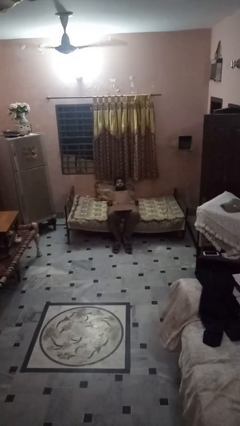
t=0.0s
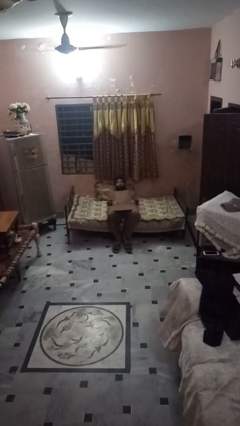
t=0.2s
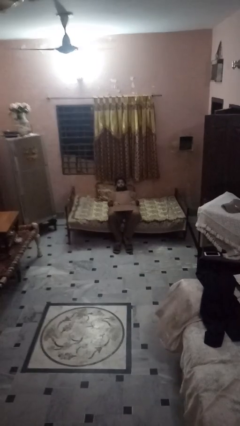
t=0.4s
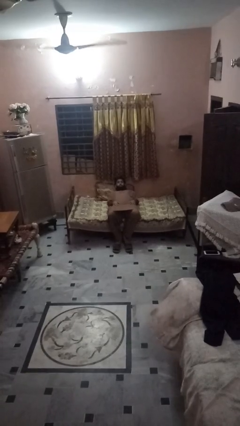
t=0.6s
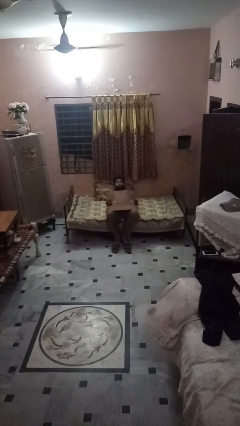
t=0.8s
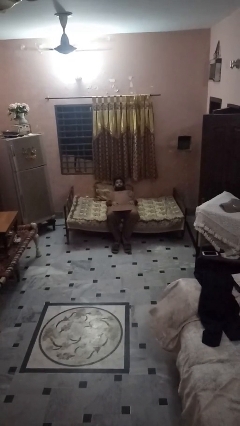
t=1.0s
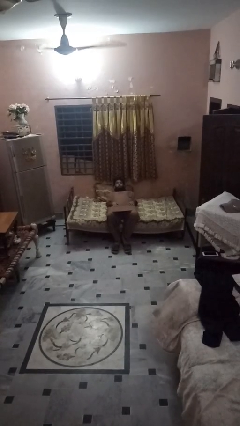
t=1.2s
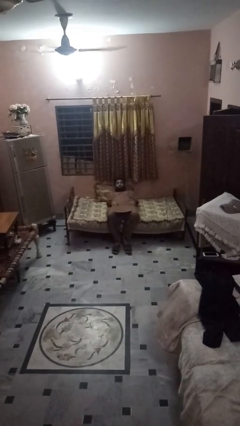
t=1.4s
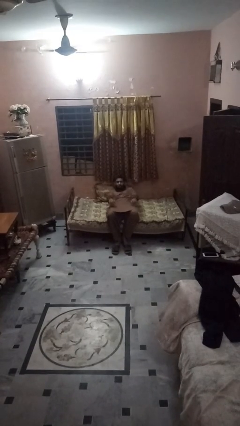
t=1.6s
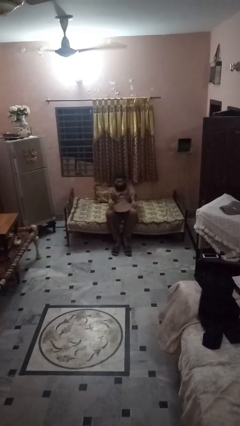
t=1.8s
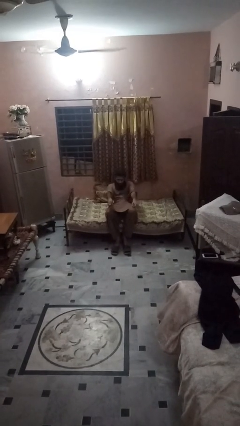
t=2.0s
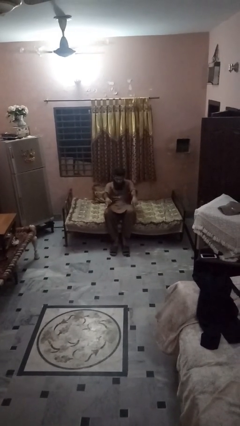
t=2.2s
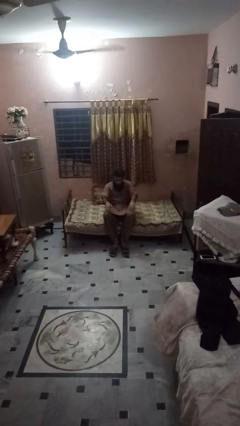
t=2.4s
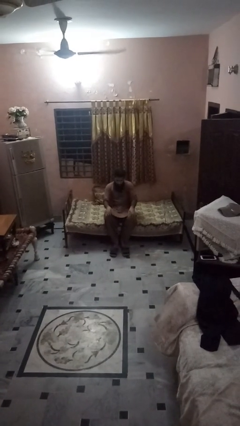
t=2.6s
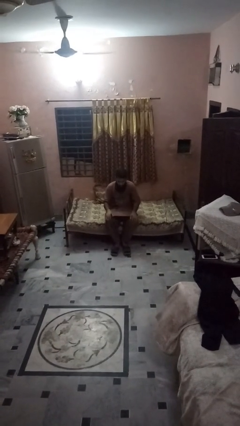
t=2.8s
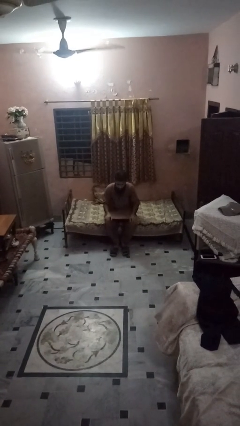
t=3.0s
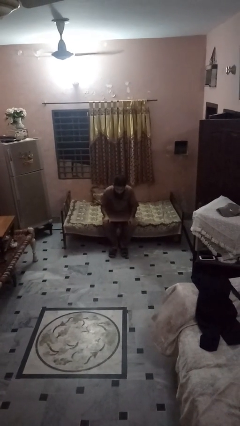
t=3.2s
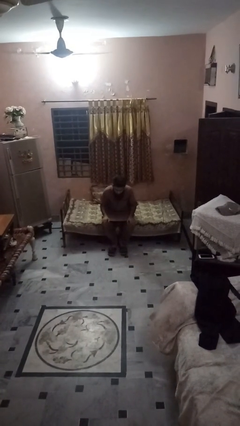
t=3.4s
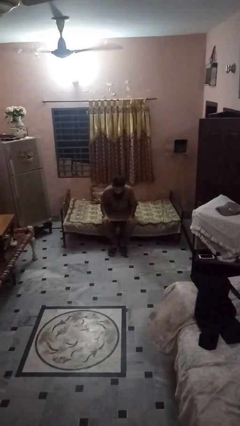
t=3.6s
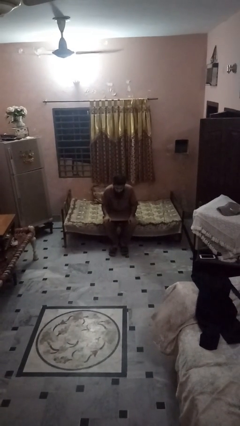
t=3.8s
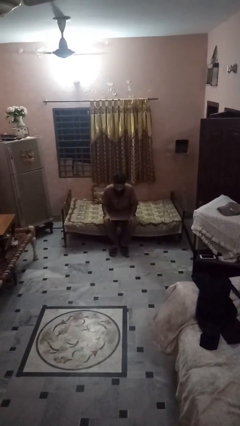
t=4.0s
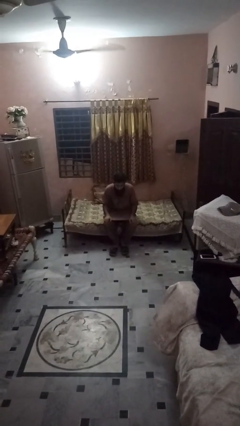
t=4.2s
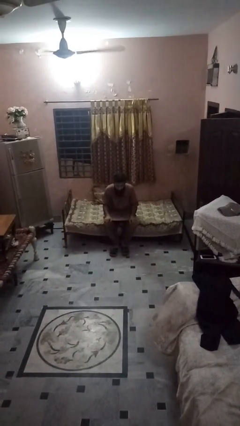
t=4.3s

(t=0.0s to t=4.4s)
person stands up

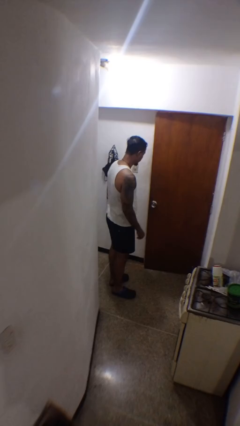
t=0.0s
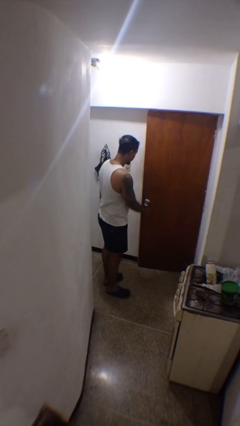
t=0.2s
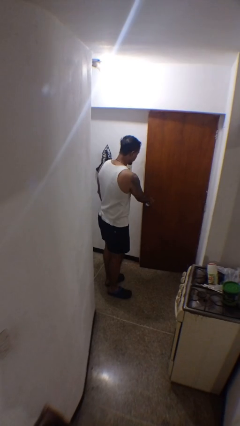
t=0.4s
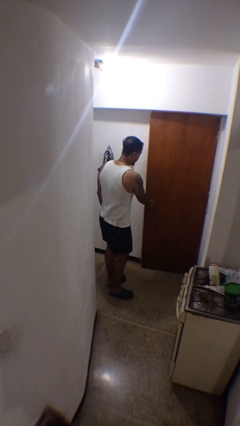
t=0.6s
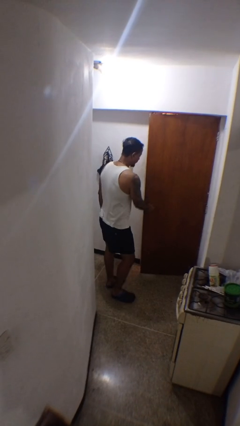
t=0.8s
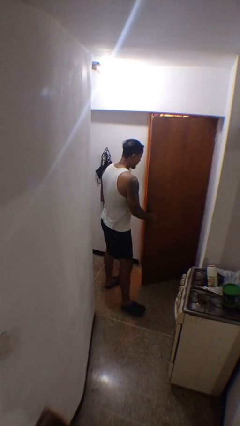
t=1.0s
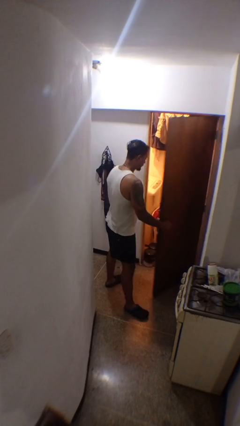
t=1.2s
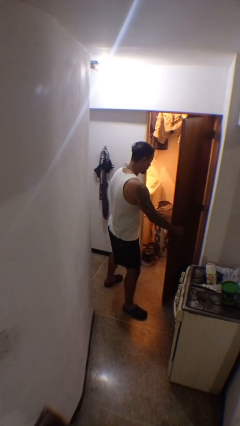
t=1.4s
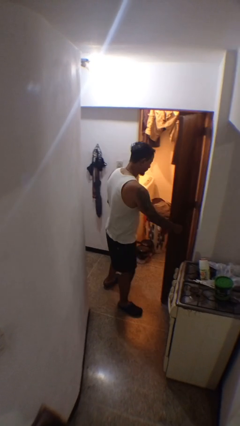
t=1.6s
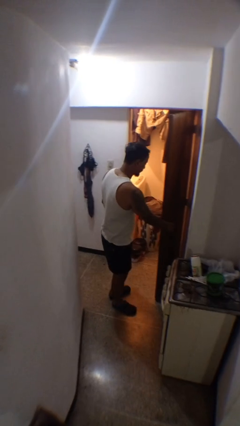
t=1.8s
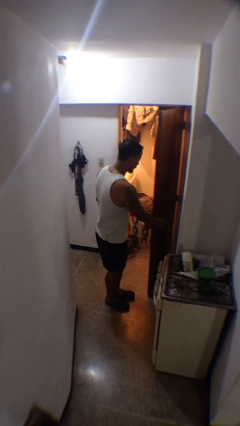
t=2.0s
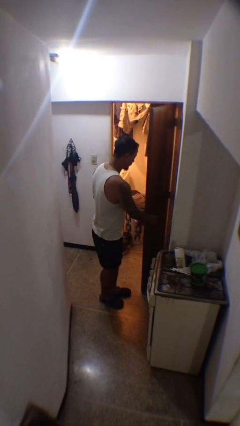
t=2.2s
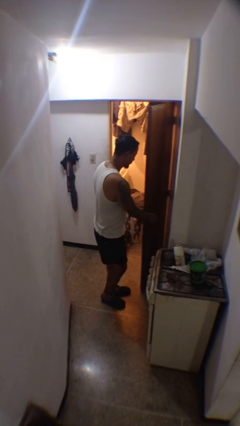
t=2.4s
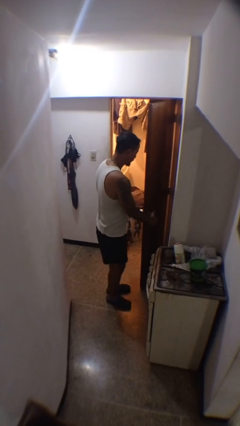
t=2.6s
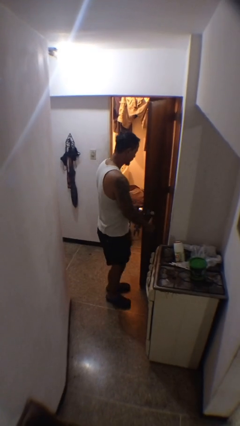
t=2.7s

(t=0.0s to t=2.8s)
person opens facility door

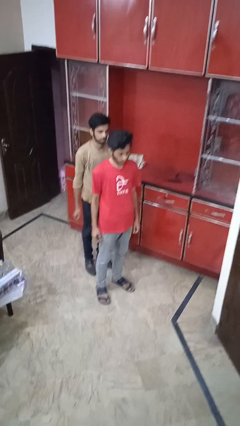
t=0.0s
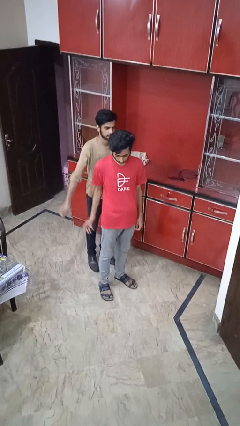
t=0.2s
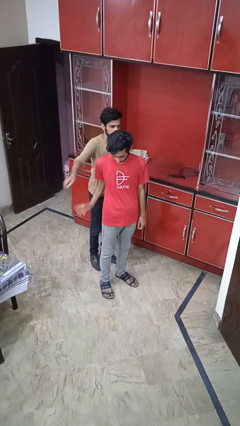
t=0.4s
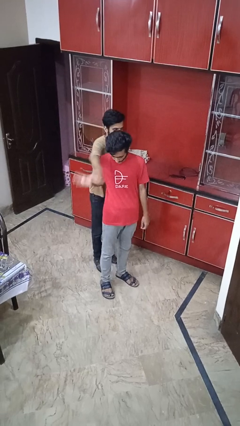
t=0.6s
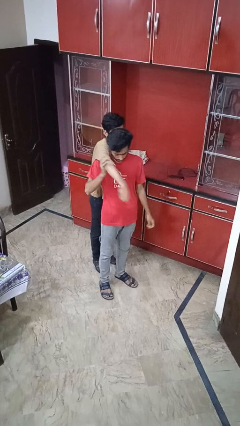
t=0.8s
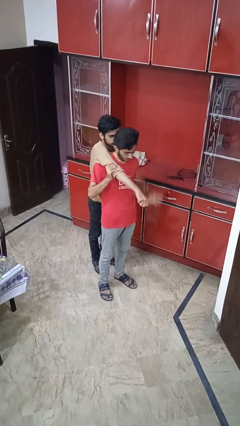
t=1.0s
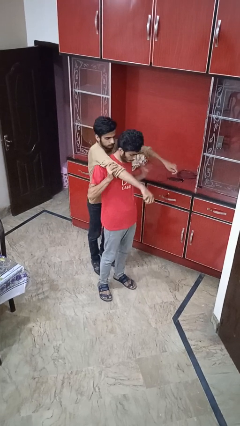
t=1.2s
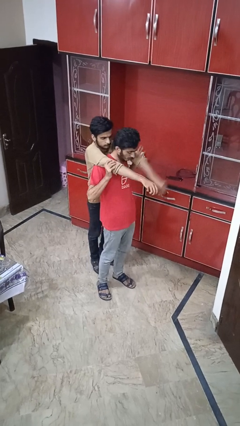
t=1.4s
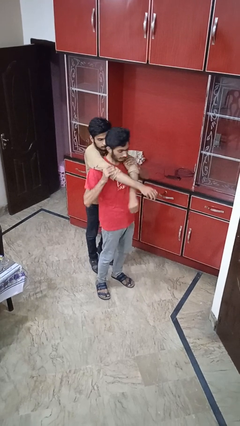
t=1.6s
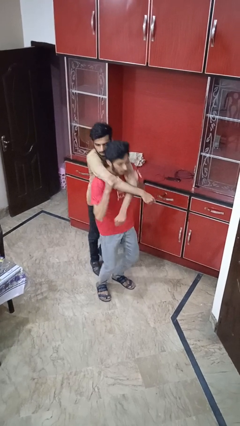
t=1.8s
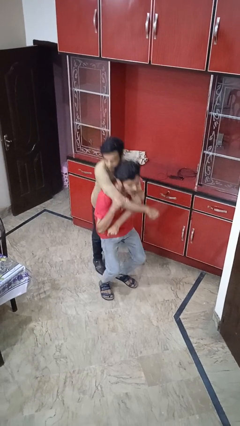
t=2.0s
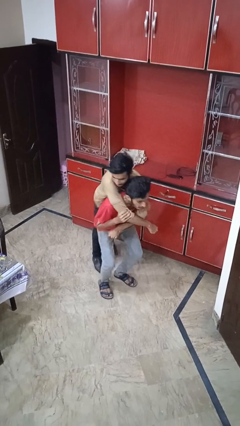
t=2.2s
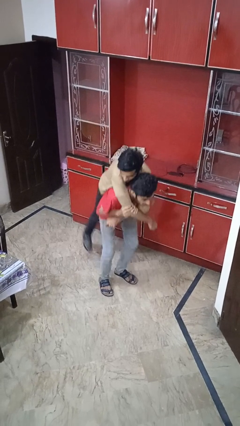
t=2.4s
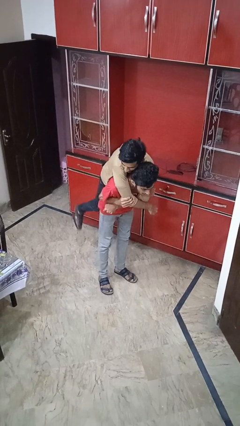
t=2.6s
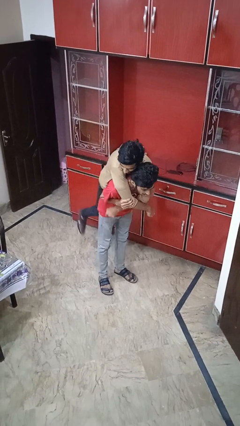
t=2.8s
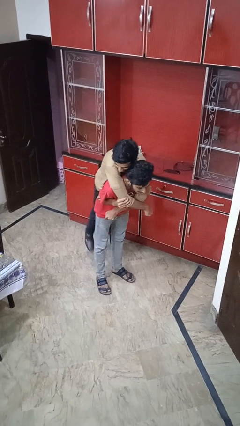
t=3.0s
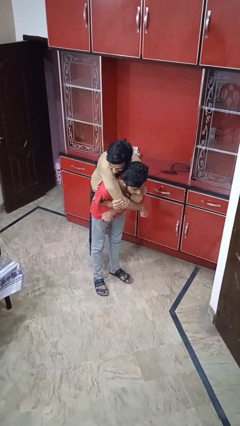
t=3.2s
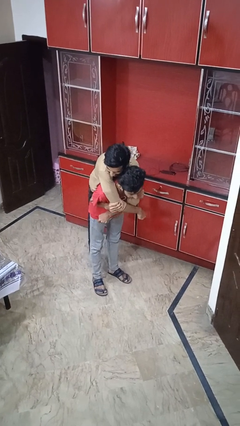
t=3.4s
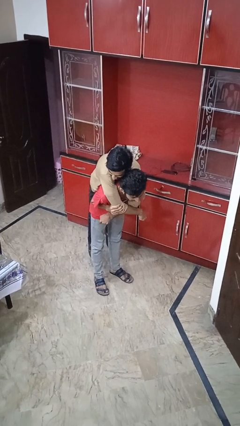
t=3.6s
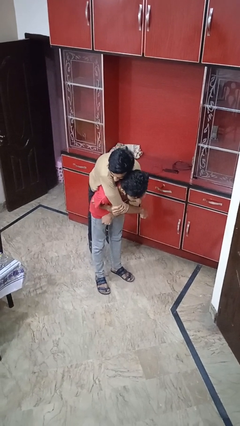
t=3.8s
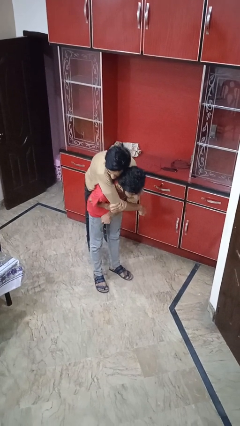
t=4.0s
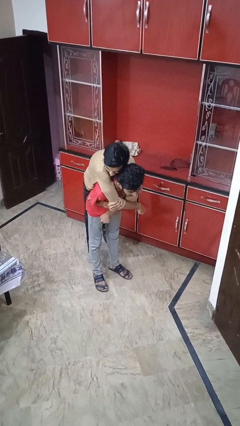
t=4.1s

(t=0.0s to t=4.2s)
person carries person over shoulder

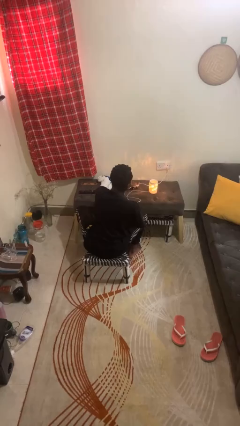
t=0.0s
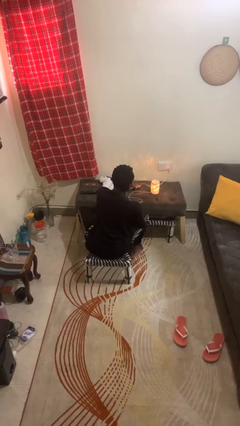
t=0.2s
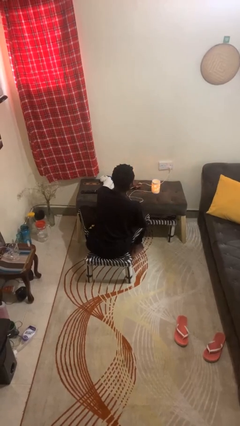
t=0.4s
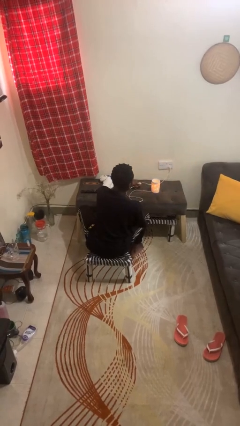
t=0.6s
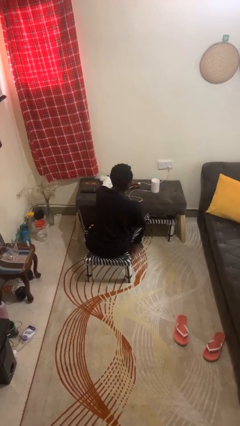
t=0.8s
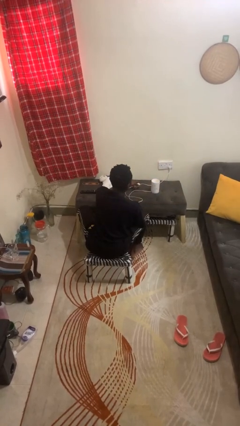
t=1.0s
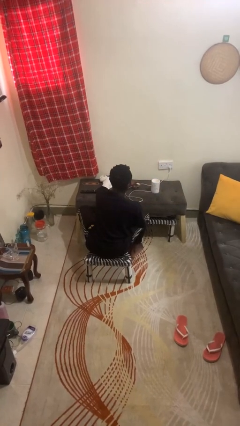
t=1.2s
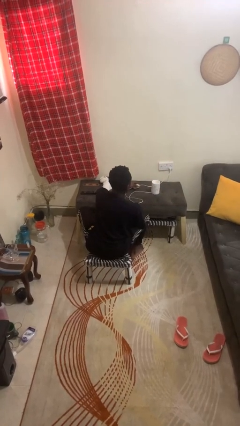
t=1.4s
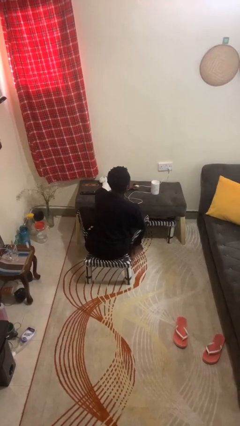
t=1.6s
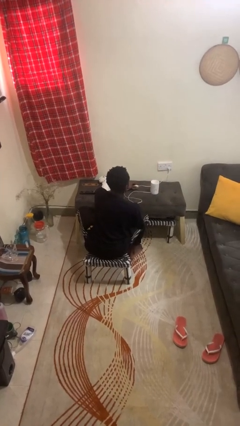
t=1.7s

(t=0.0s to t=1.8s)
person turns off lamp

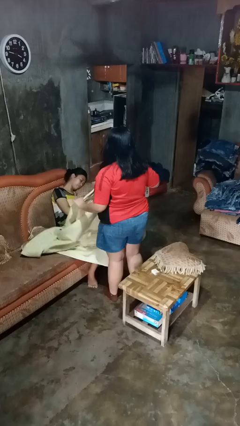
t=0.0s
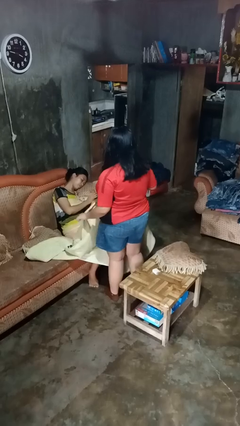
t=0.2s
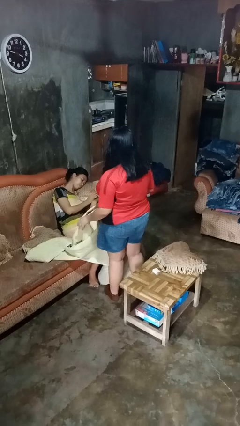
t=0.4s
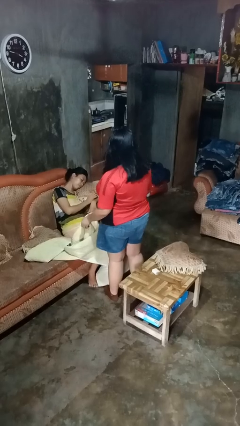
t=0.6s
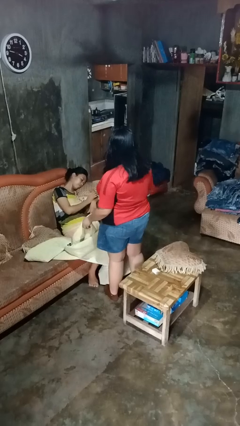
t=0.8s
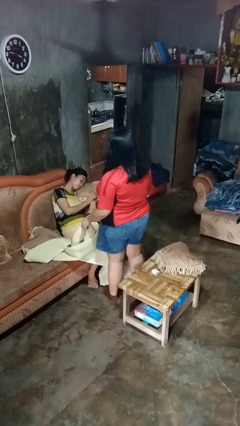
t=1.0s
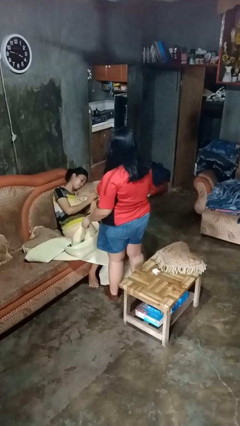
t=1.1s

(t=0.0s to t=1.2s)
person uncovers friend with blanket

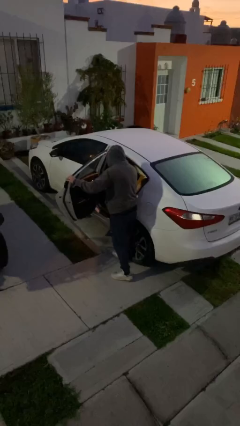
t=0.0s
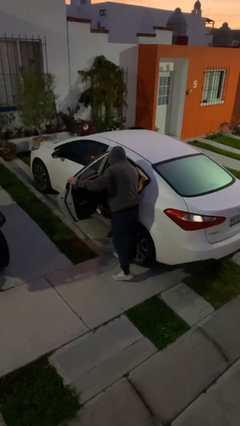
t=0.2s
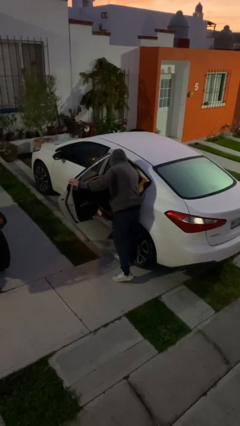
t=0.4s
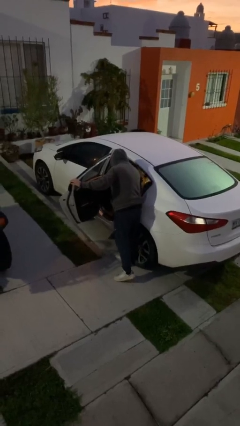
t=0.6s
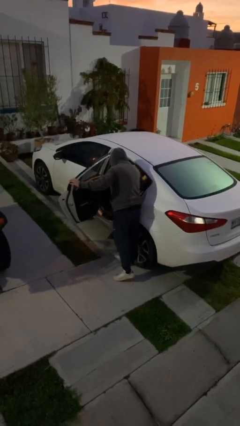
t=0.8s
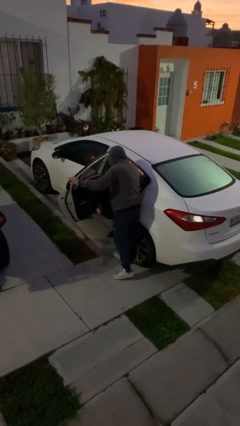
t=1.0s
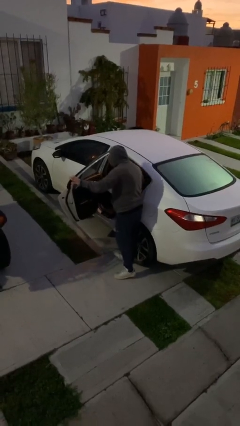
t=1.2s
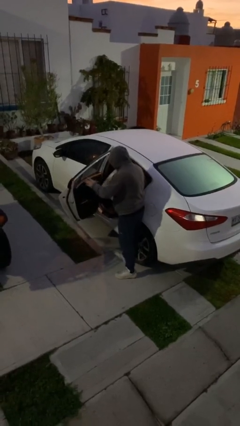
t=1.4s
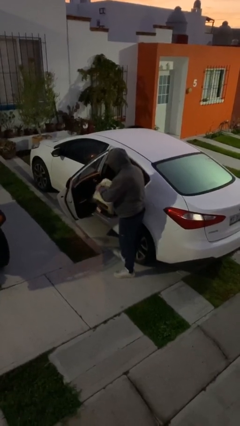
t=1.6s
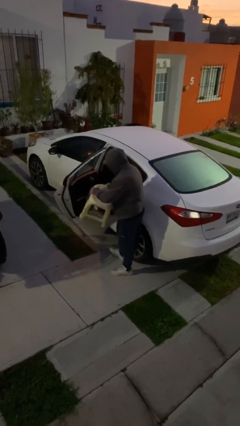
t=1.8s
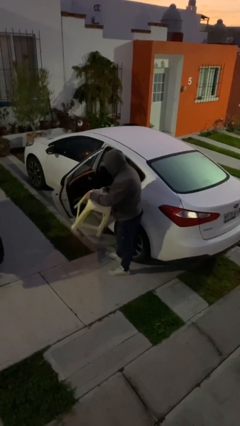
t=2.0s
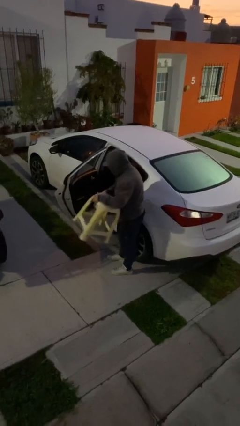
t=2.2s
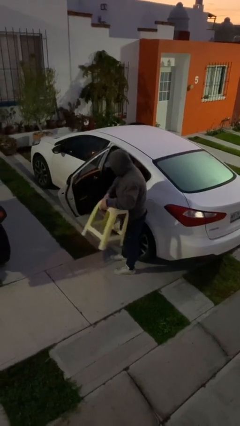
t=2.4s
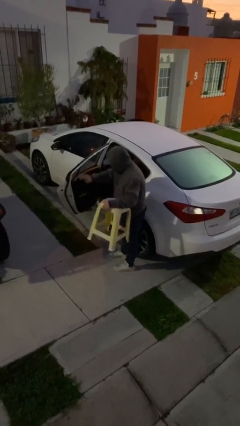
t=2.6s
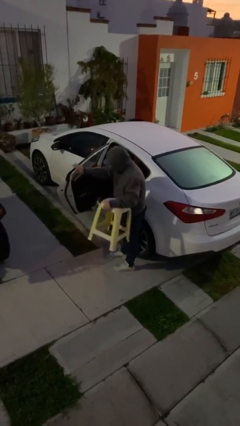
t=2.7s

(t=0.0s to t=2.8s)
person unloads car
